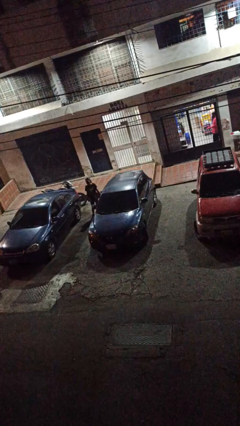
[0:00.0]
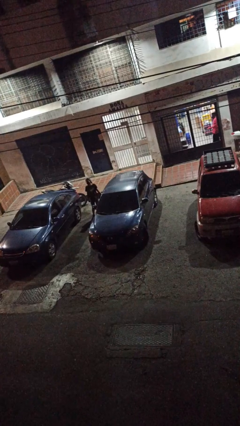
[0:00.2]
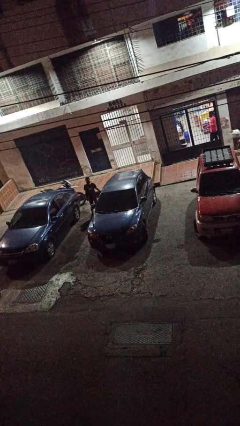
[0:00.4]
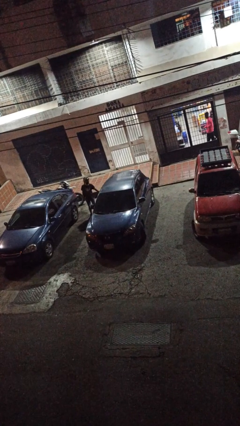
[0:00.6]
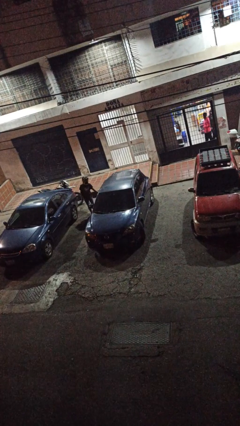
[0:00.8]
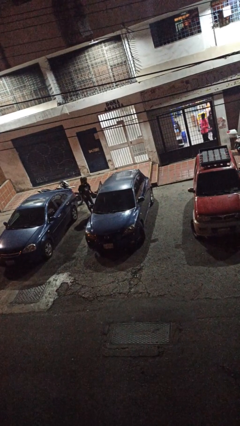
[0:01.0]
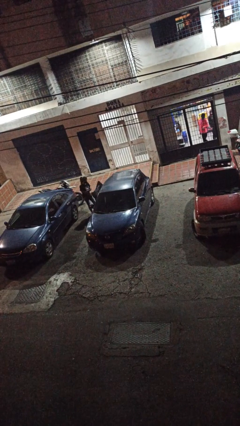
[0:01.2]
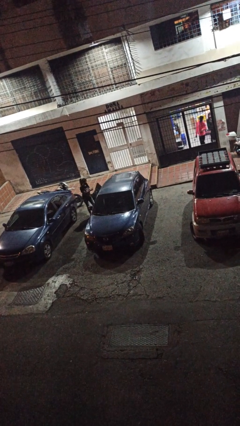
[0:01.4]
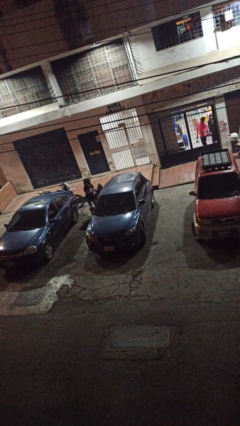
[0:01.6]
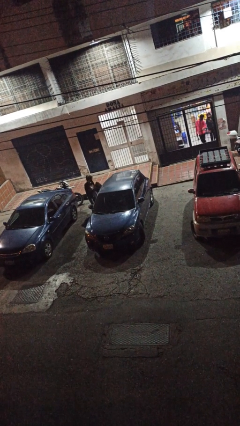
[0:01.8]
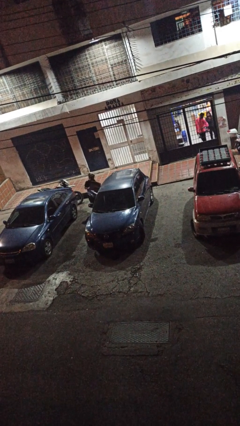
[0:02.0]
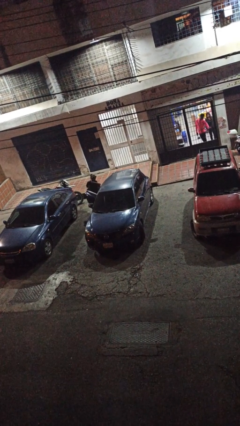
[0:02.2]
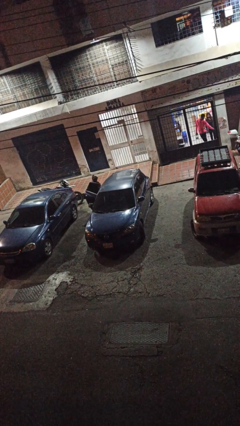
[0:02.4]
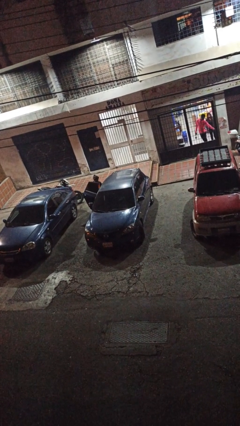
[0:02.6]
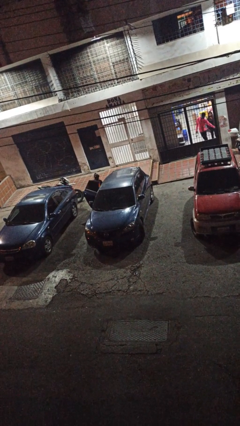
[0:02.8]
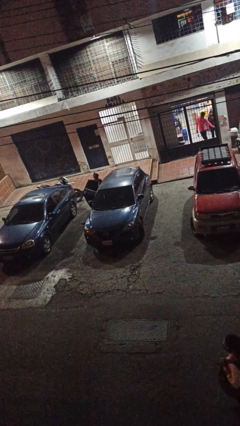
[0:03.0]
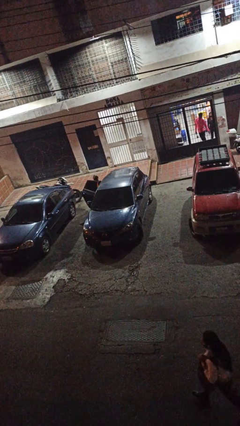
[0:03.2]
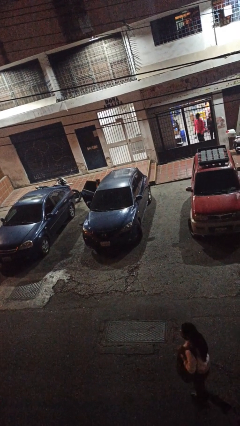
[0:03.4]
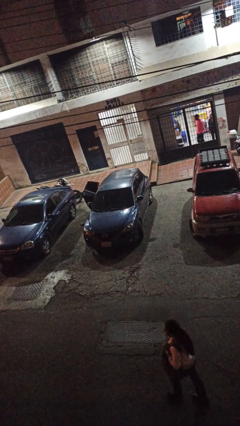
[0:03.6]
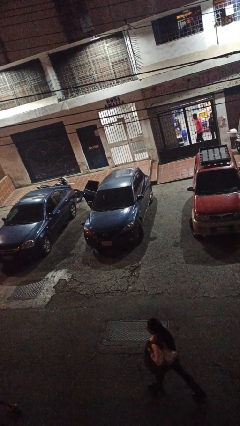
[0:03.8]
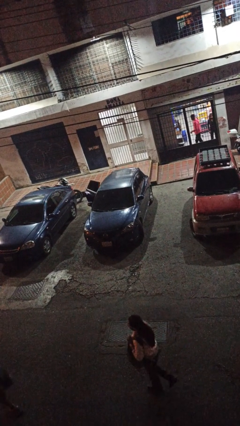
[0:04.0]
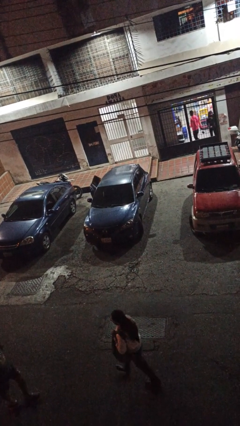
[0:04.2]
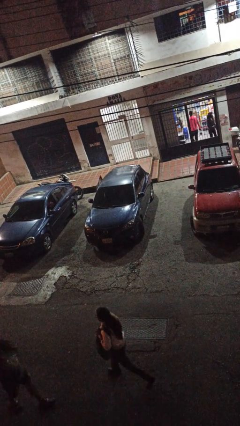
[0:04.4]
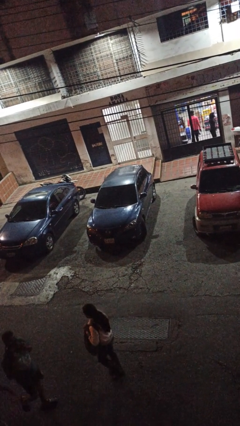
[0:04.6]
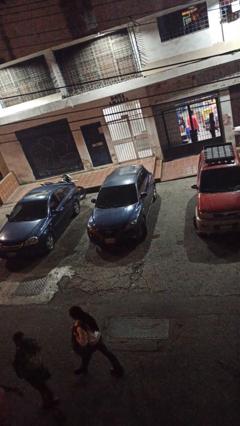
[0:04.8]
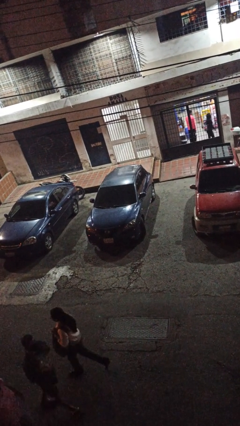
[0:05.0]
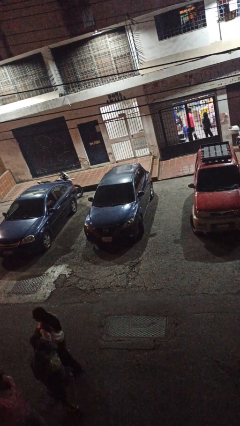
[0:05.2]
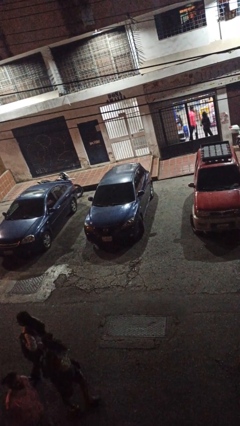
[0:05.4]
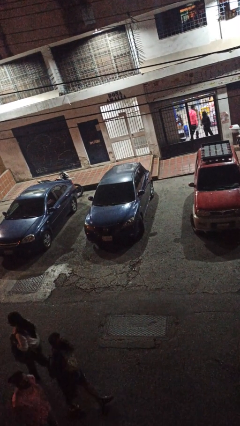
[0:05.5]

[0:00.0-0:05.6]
car picks up person

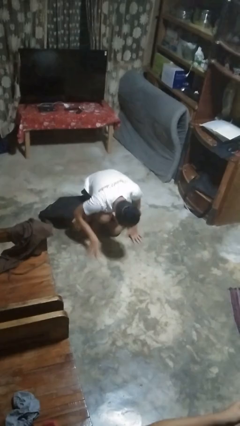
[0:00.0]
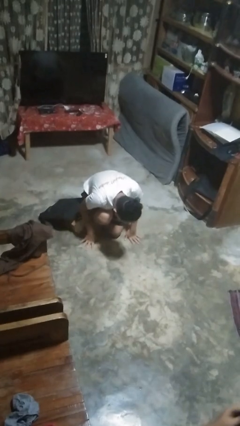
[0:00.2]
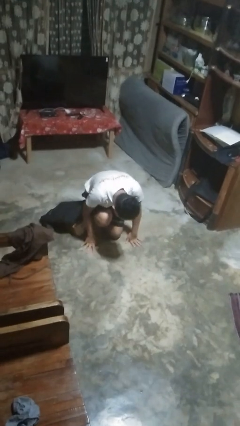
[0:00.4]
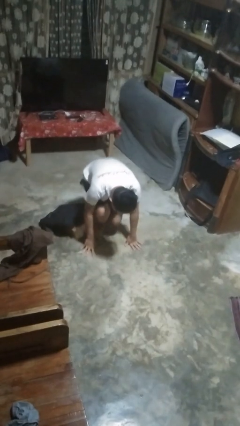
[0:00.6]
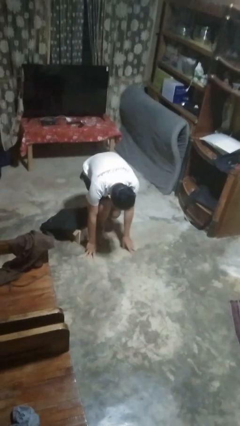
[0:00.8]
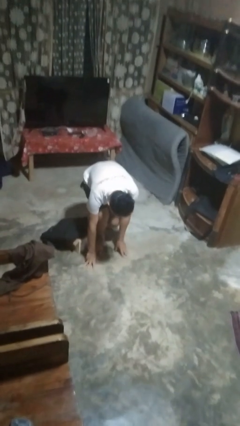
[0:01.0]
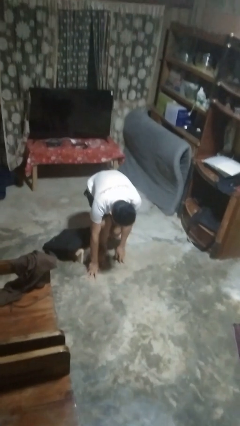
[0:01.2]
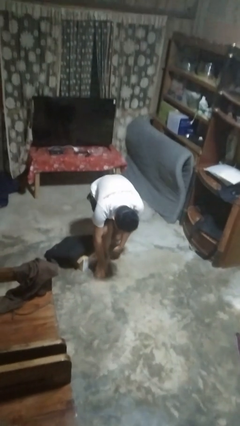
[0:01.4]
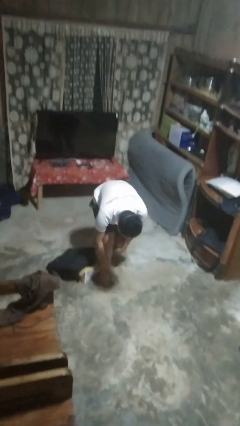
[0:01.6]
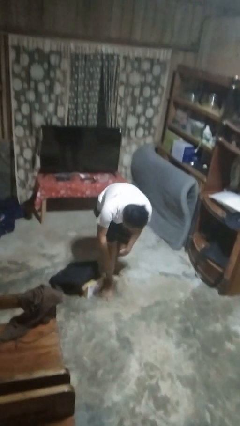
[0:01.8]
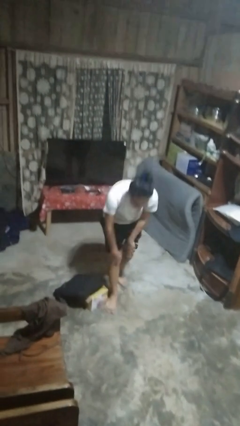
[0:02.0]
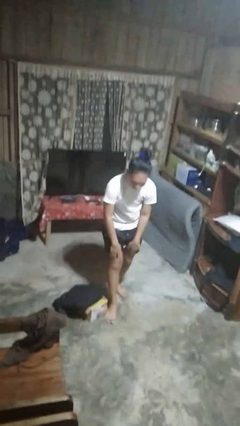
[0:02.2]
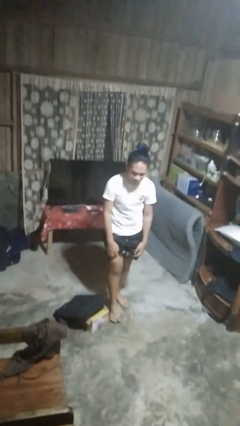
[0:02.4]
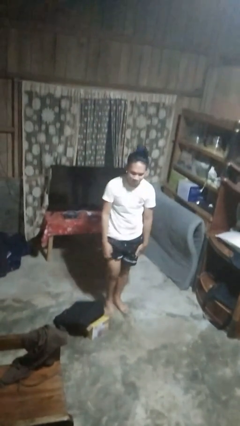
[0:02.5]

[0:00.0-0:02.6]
person stands up from floor

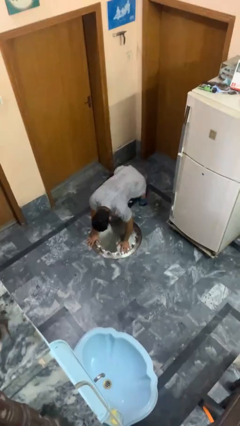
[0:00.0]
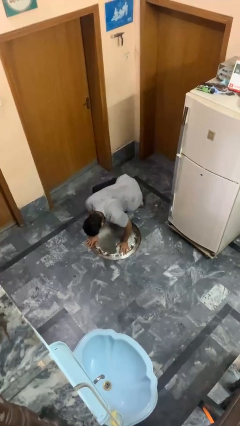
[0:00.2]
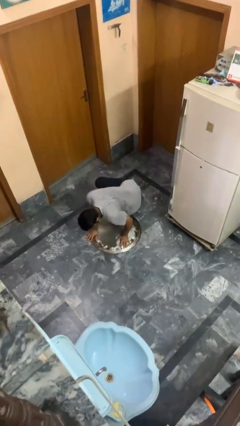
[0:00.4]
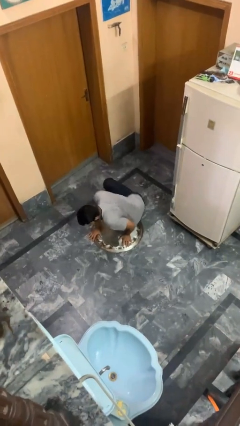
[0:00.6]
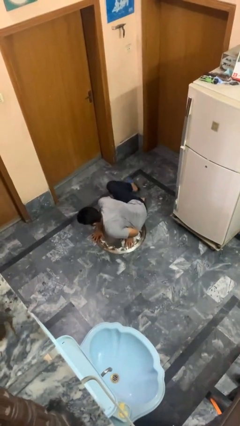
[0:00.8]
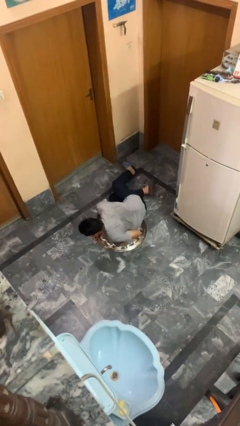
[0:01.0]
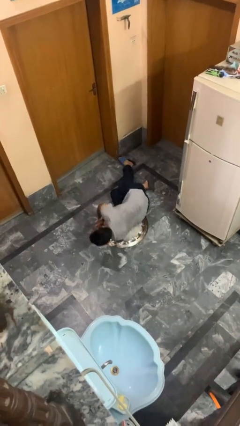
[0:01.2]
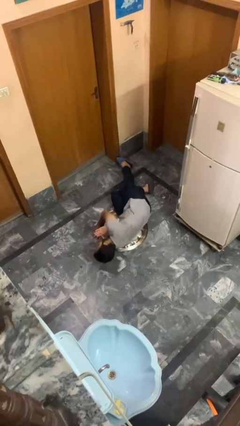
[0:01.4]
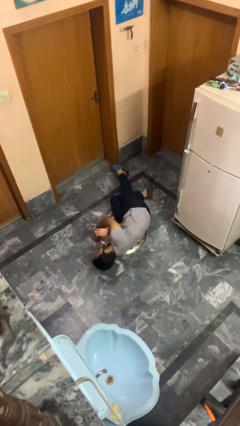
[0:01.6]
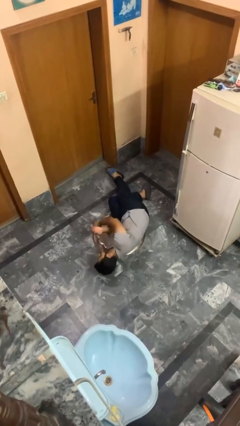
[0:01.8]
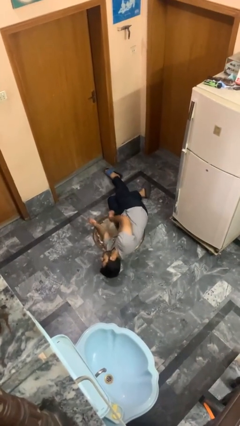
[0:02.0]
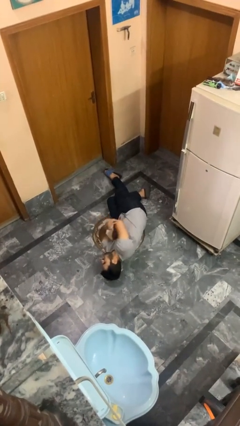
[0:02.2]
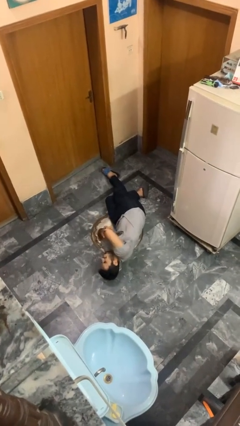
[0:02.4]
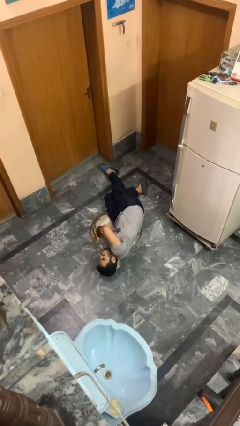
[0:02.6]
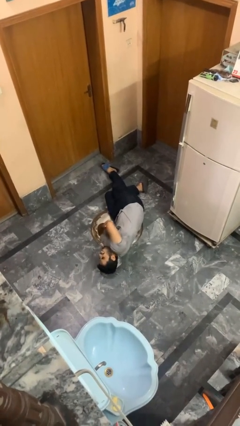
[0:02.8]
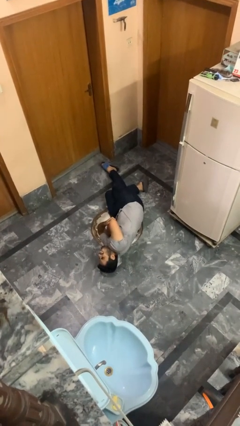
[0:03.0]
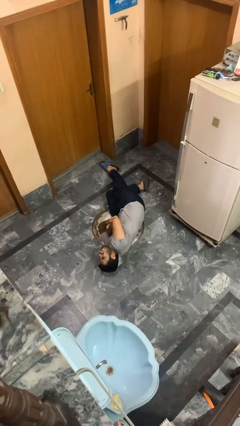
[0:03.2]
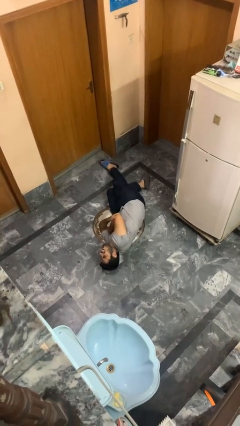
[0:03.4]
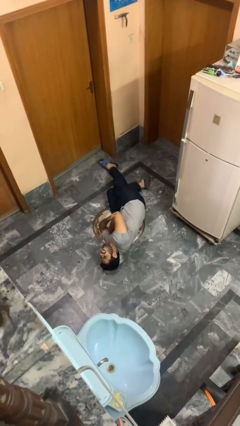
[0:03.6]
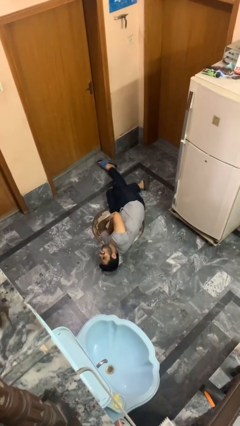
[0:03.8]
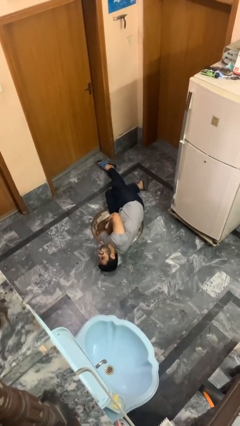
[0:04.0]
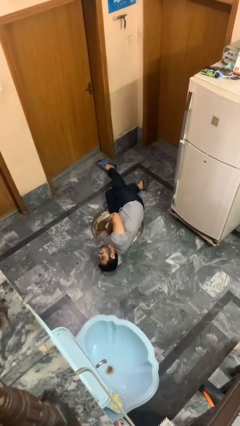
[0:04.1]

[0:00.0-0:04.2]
person lies down on floor

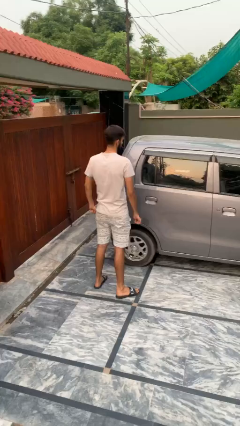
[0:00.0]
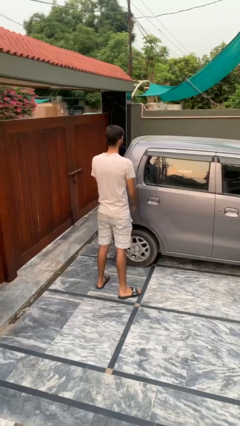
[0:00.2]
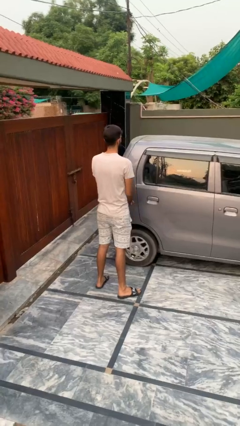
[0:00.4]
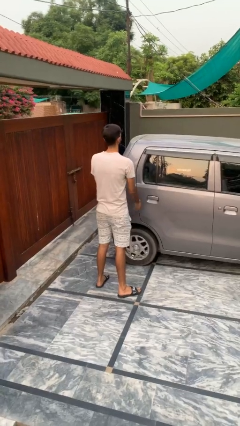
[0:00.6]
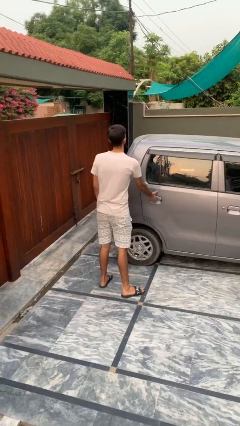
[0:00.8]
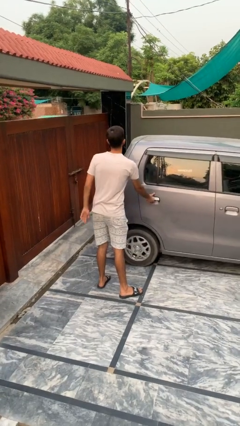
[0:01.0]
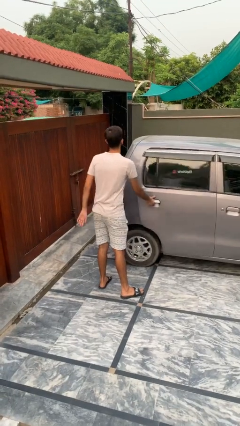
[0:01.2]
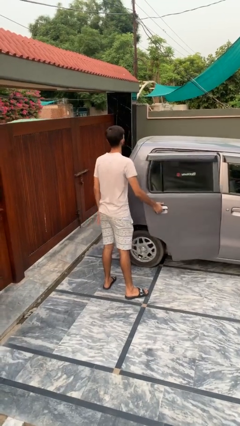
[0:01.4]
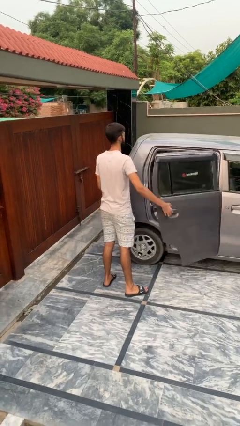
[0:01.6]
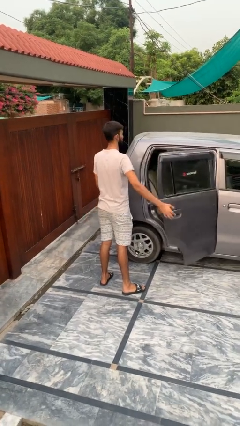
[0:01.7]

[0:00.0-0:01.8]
person opens car door

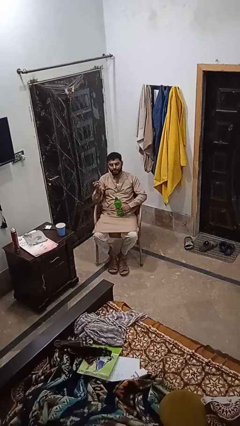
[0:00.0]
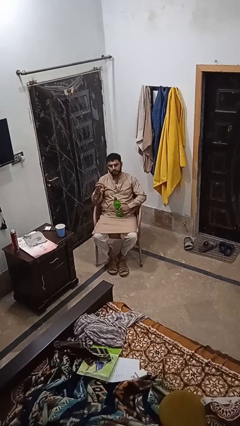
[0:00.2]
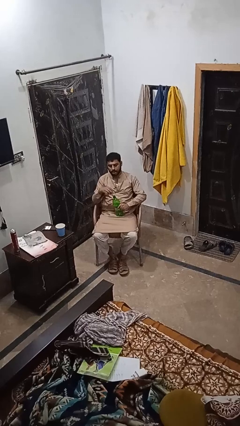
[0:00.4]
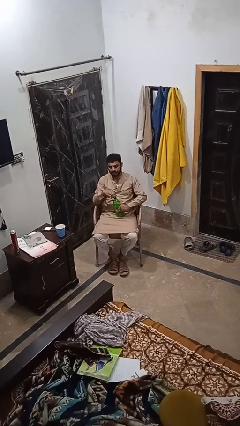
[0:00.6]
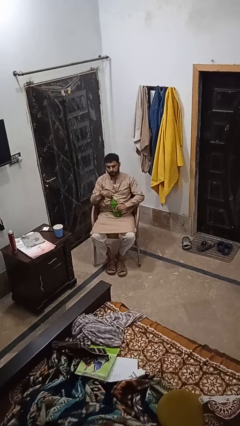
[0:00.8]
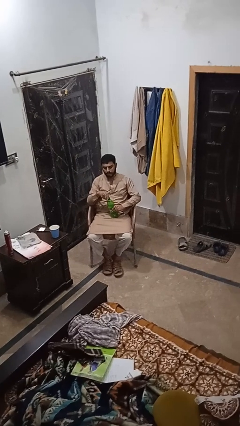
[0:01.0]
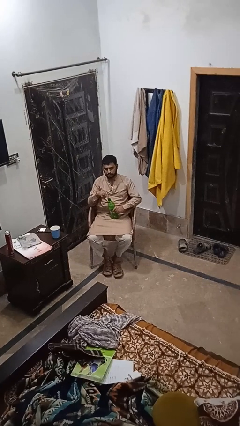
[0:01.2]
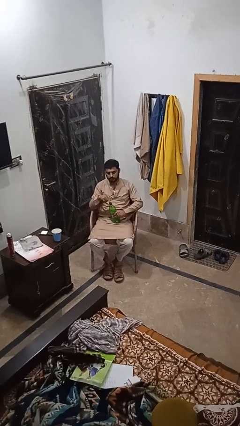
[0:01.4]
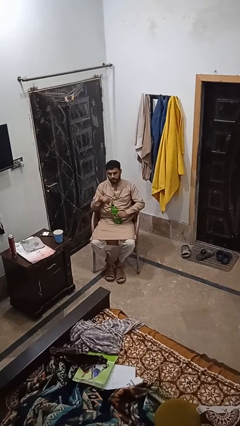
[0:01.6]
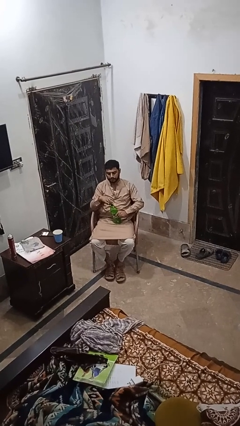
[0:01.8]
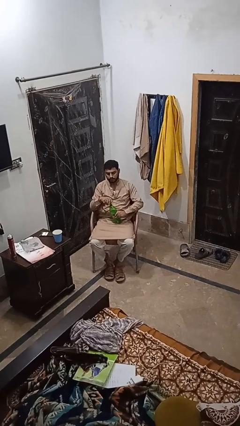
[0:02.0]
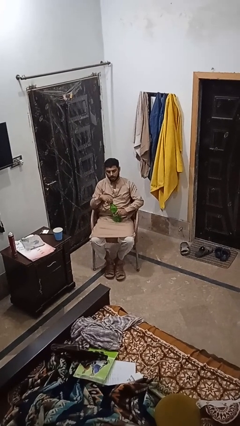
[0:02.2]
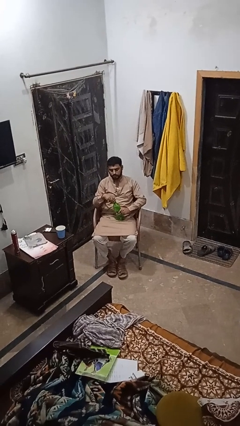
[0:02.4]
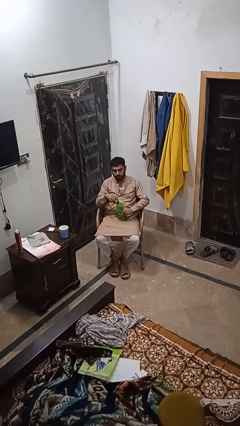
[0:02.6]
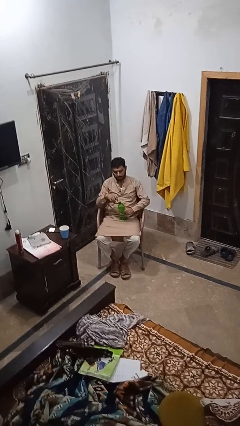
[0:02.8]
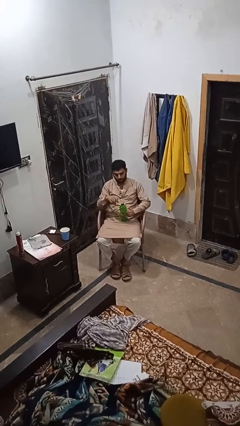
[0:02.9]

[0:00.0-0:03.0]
person screws lid to bottle

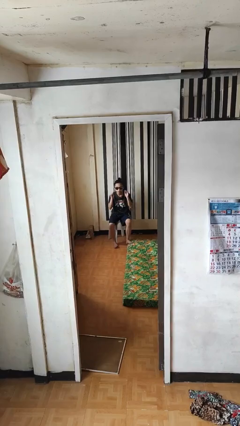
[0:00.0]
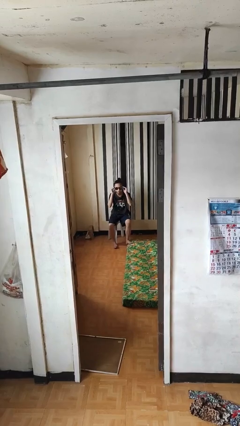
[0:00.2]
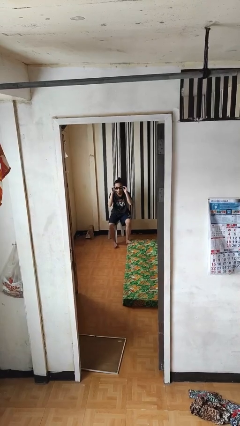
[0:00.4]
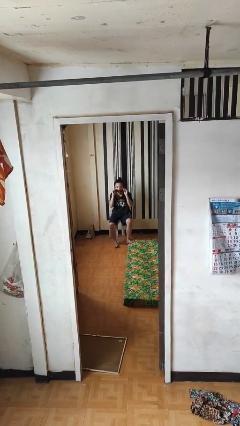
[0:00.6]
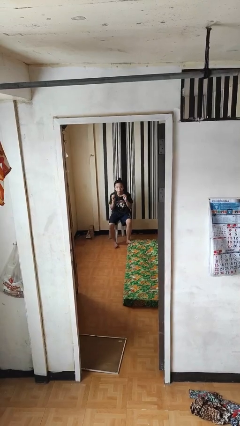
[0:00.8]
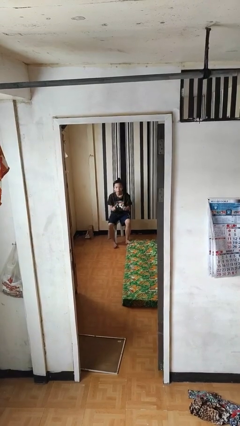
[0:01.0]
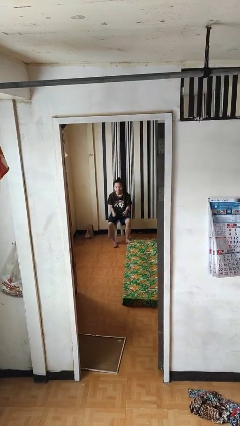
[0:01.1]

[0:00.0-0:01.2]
person takes off sunglasses
